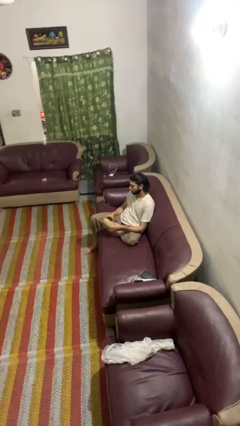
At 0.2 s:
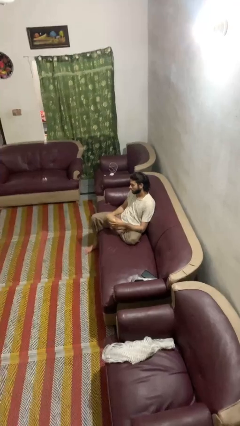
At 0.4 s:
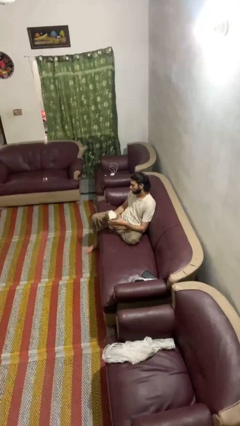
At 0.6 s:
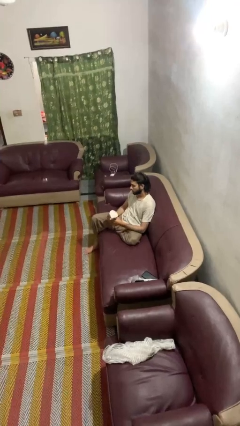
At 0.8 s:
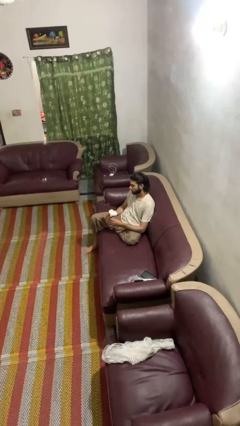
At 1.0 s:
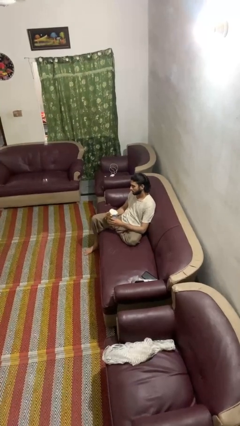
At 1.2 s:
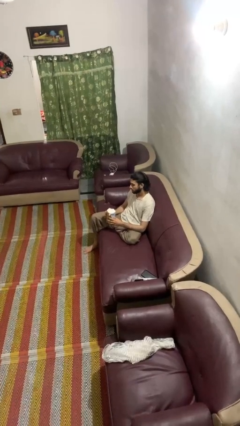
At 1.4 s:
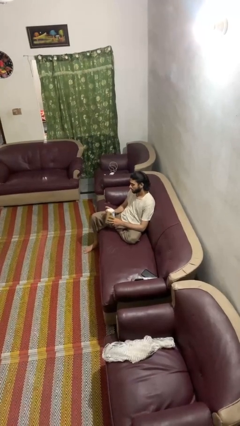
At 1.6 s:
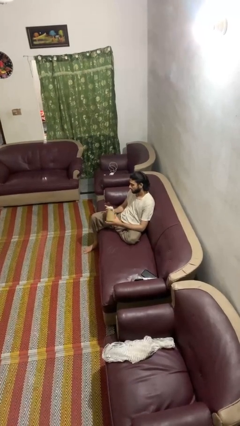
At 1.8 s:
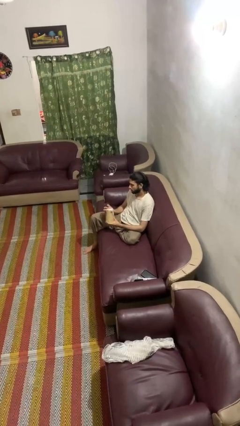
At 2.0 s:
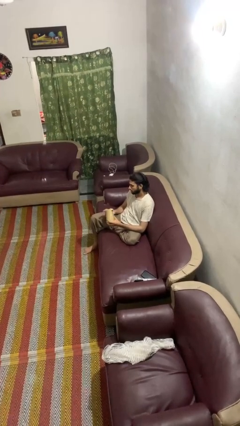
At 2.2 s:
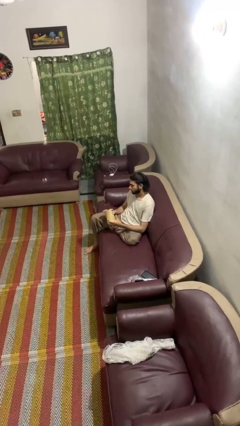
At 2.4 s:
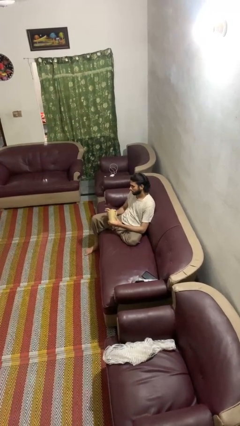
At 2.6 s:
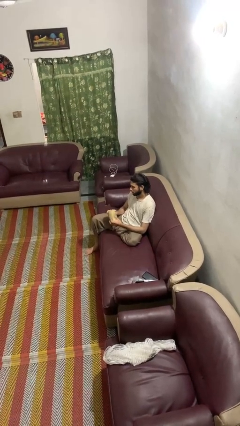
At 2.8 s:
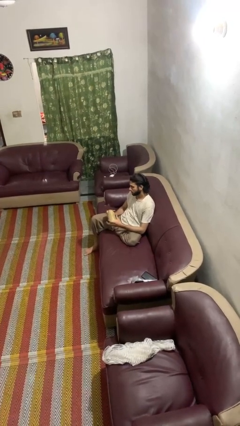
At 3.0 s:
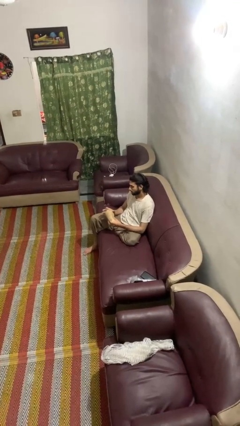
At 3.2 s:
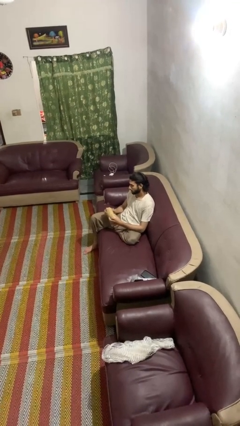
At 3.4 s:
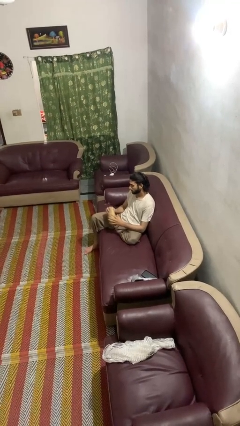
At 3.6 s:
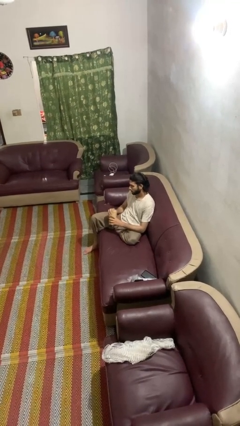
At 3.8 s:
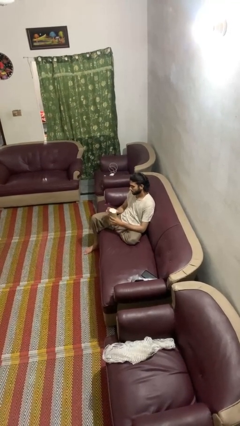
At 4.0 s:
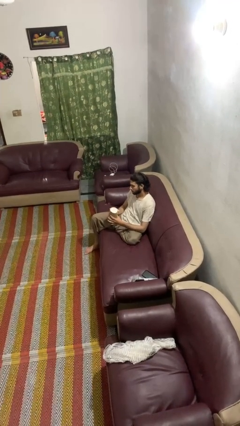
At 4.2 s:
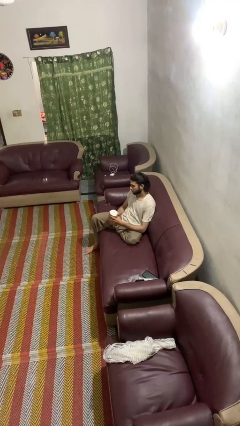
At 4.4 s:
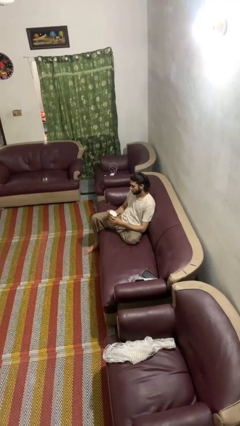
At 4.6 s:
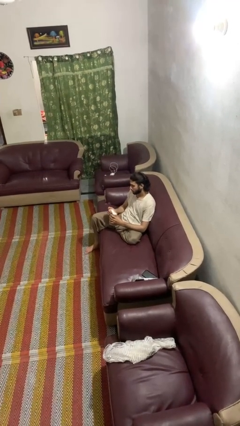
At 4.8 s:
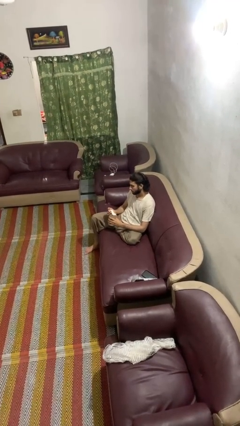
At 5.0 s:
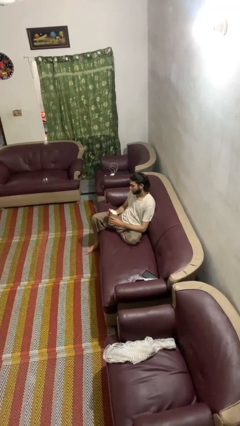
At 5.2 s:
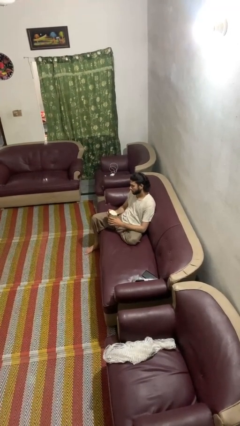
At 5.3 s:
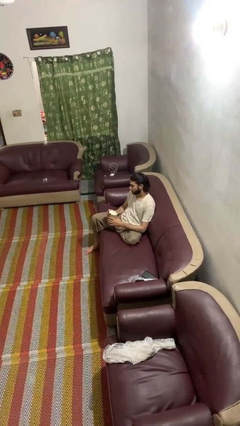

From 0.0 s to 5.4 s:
person squeezes object

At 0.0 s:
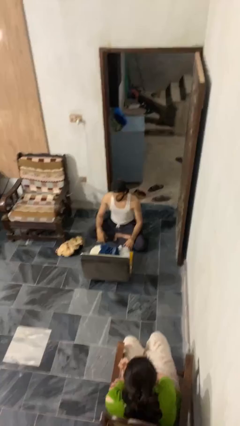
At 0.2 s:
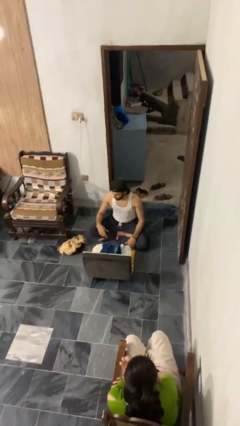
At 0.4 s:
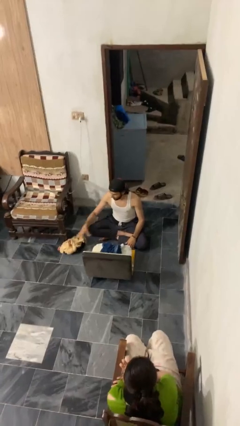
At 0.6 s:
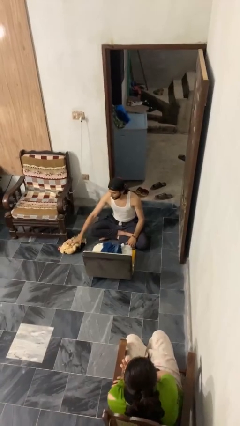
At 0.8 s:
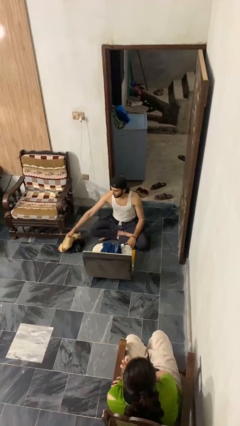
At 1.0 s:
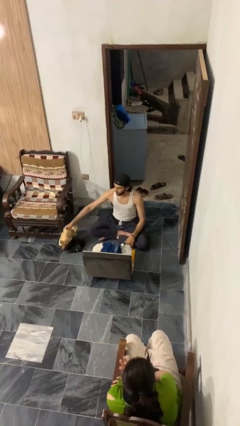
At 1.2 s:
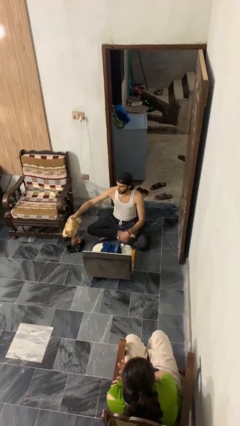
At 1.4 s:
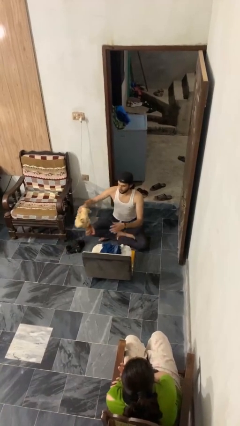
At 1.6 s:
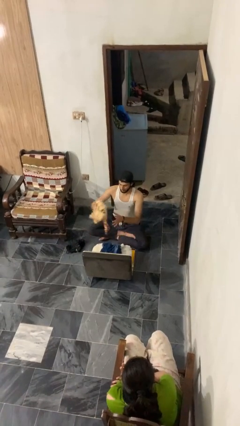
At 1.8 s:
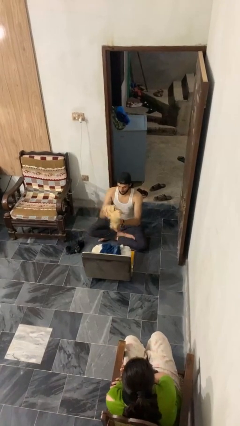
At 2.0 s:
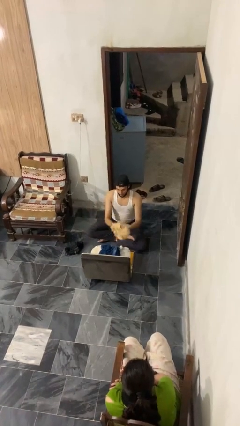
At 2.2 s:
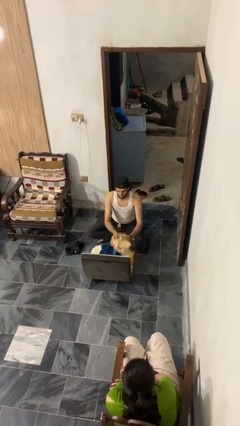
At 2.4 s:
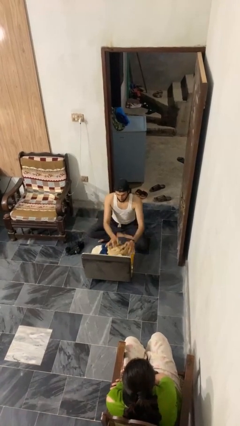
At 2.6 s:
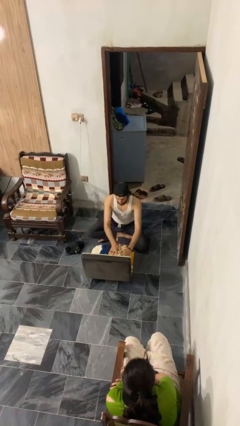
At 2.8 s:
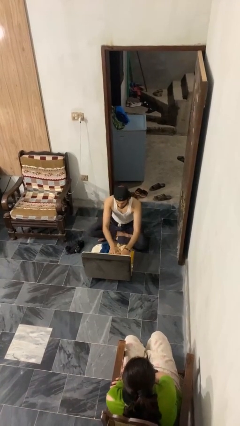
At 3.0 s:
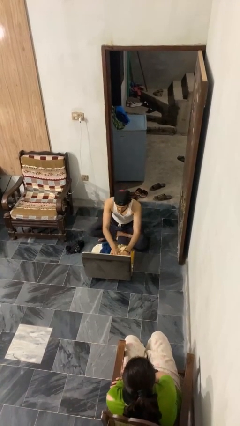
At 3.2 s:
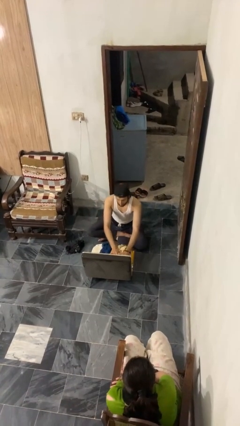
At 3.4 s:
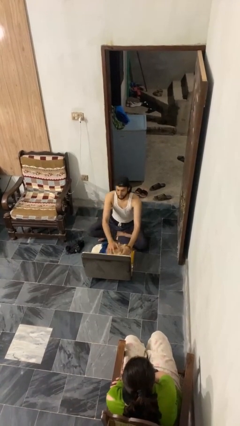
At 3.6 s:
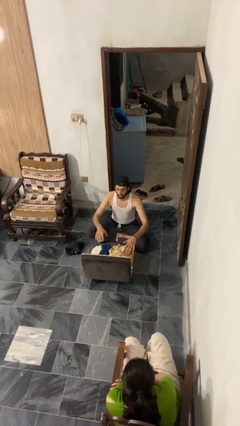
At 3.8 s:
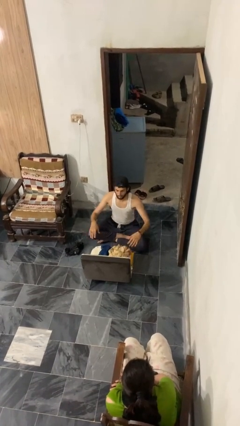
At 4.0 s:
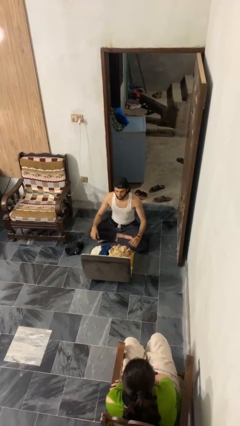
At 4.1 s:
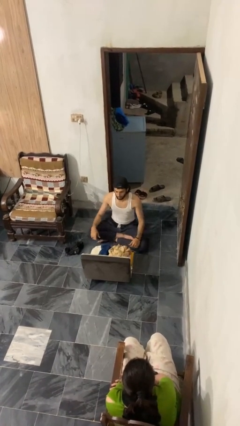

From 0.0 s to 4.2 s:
person loads clothes into suitcase

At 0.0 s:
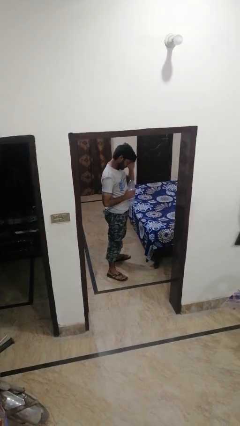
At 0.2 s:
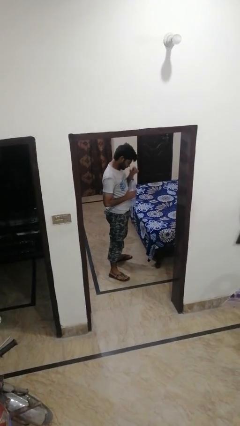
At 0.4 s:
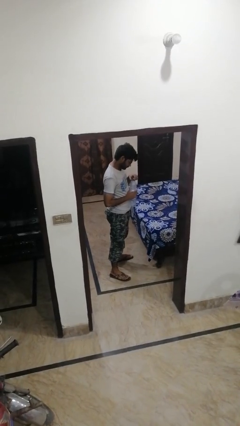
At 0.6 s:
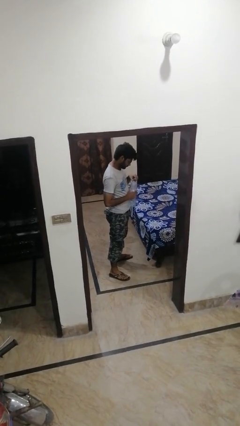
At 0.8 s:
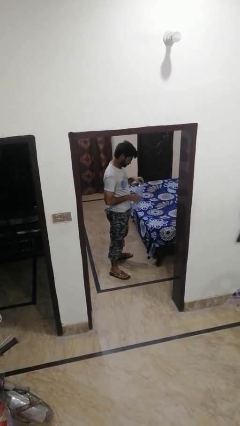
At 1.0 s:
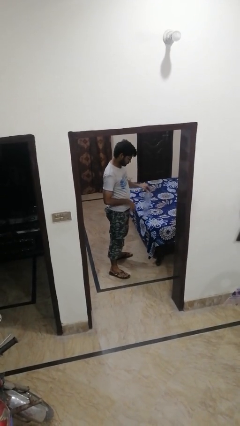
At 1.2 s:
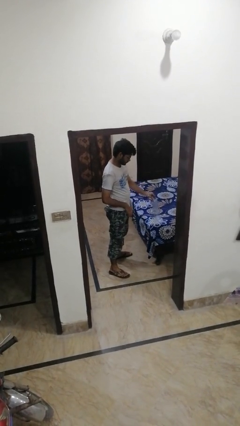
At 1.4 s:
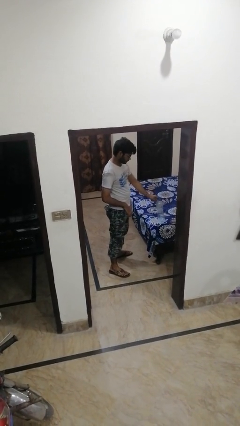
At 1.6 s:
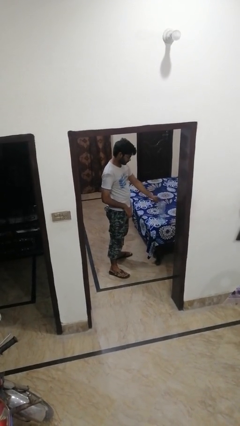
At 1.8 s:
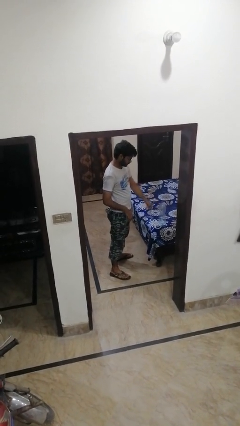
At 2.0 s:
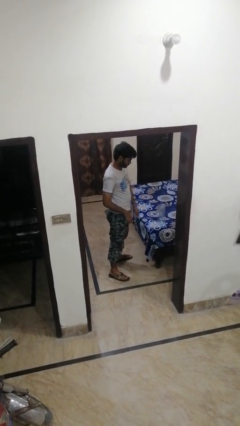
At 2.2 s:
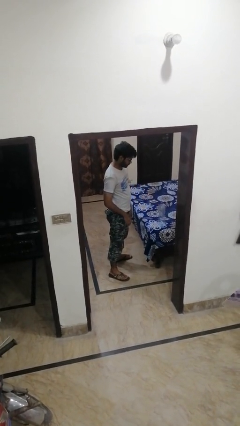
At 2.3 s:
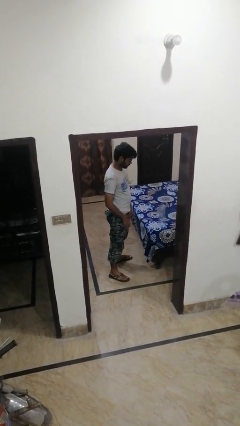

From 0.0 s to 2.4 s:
person puts down object on bed

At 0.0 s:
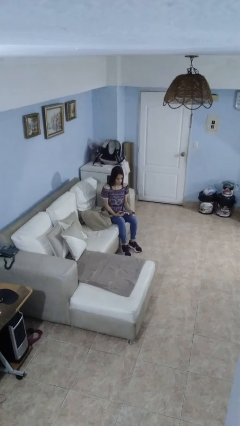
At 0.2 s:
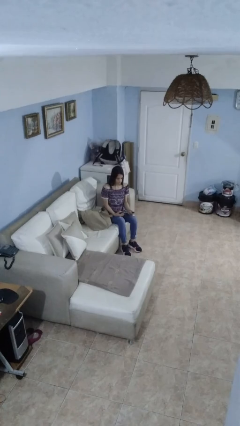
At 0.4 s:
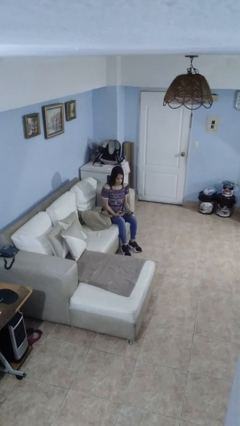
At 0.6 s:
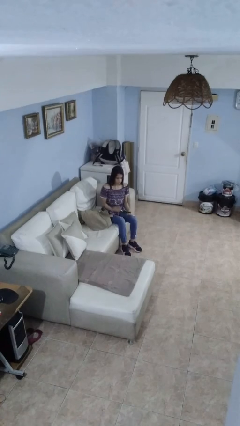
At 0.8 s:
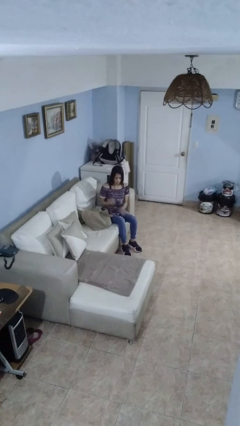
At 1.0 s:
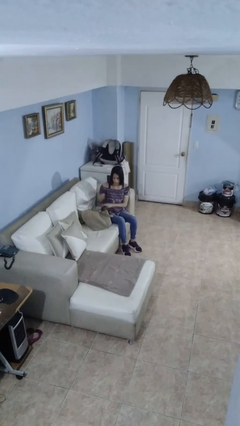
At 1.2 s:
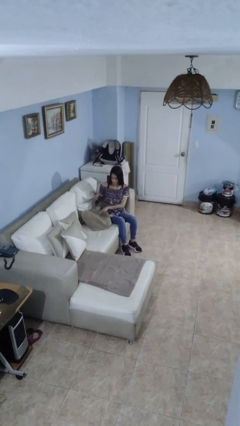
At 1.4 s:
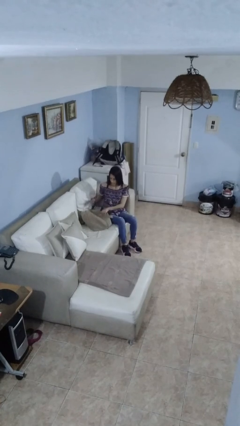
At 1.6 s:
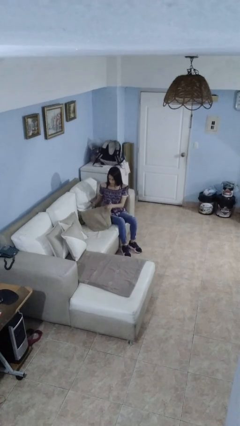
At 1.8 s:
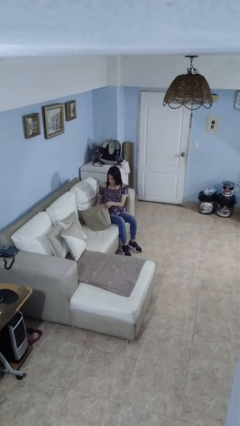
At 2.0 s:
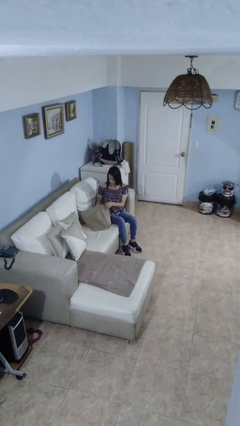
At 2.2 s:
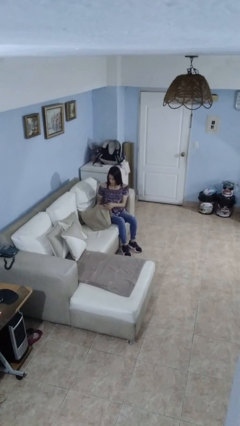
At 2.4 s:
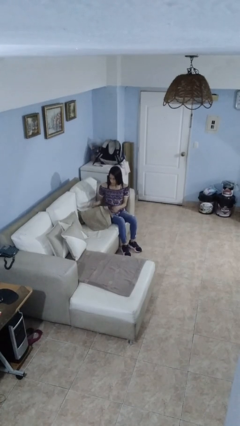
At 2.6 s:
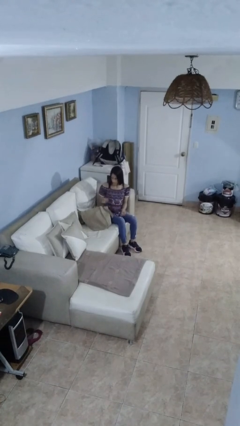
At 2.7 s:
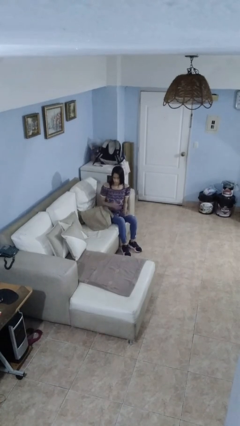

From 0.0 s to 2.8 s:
person puts object into bag

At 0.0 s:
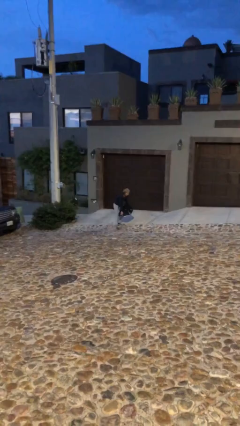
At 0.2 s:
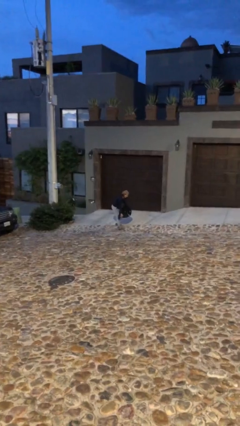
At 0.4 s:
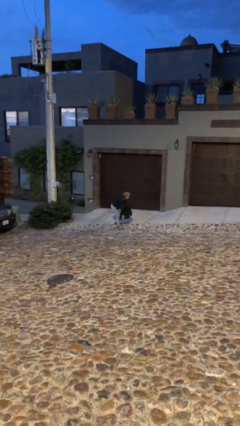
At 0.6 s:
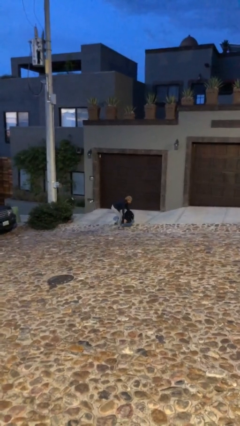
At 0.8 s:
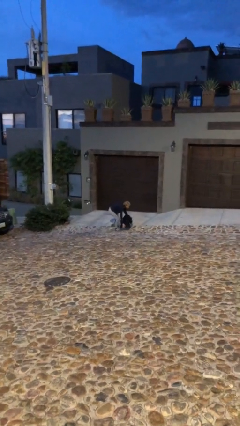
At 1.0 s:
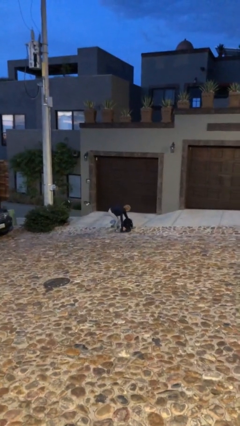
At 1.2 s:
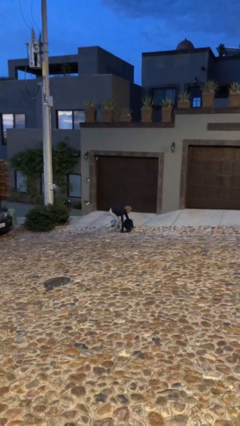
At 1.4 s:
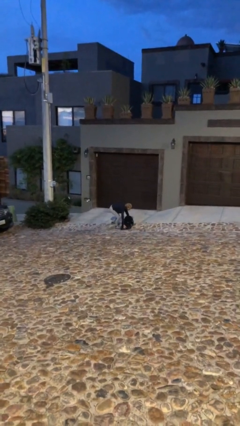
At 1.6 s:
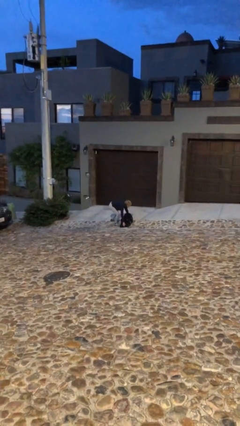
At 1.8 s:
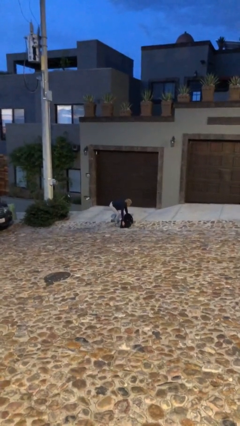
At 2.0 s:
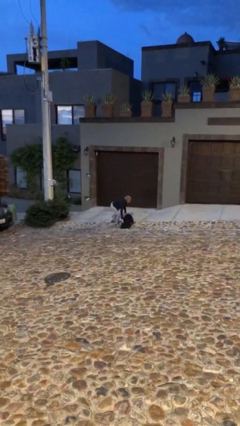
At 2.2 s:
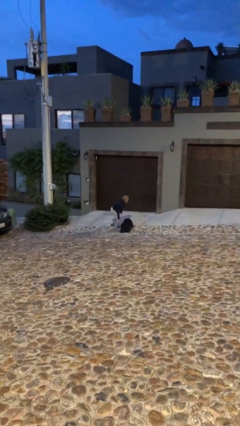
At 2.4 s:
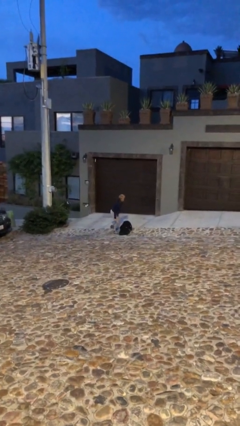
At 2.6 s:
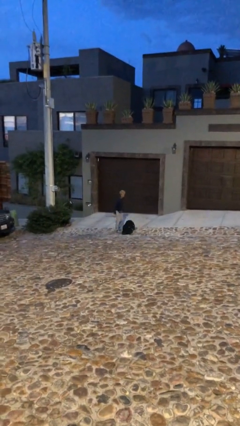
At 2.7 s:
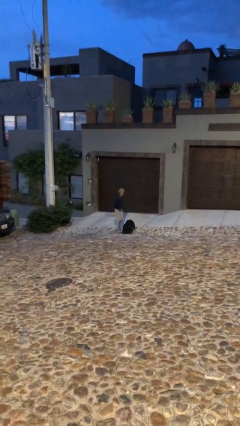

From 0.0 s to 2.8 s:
person puts down object on floor
